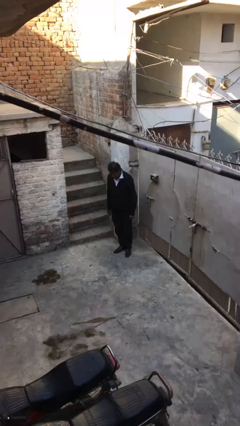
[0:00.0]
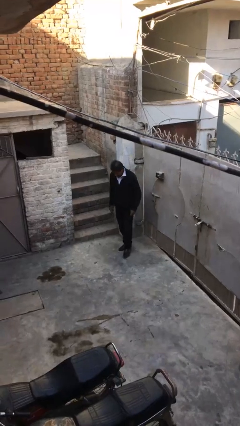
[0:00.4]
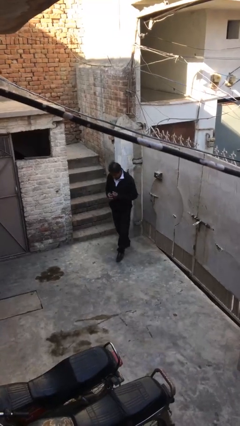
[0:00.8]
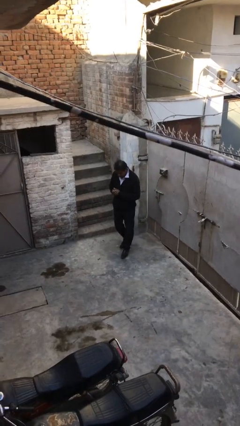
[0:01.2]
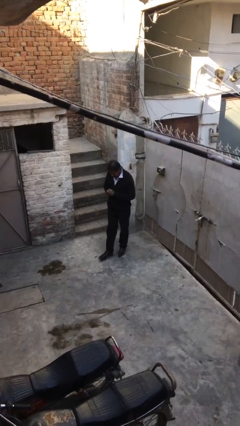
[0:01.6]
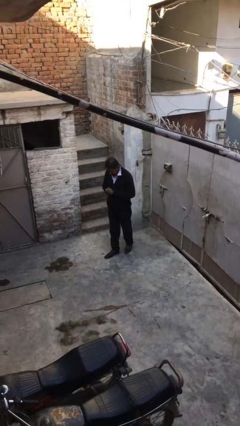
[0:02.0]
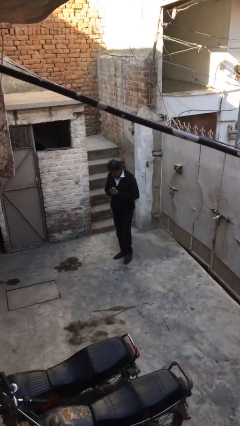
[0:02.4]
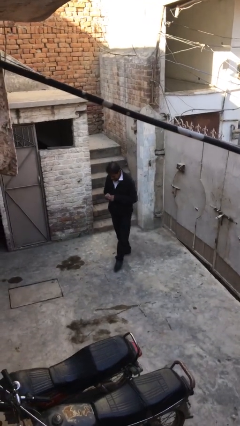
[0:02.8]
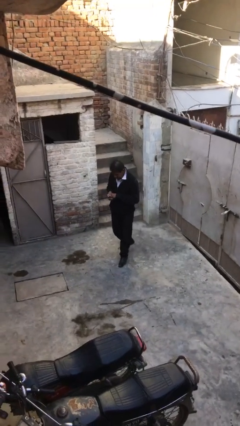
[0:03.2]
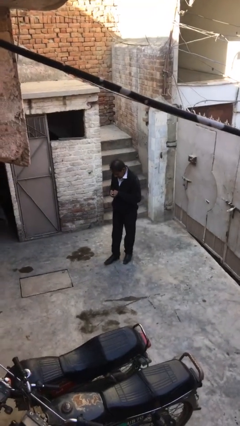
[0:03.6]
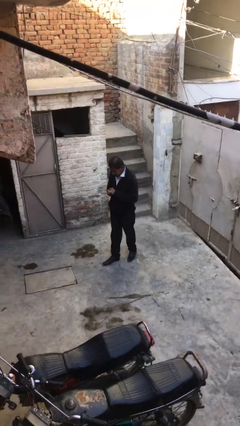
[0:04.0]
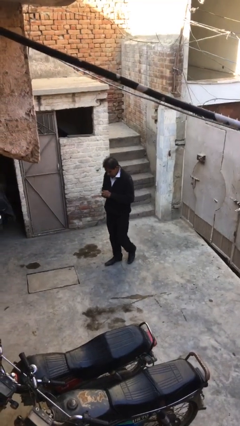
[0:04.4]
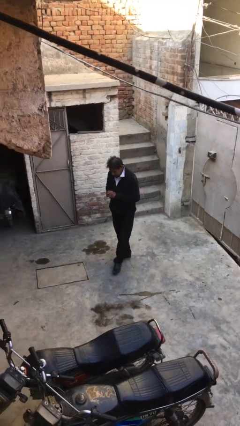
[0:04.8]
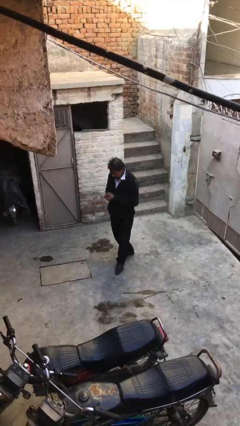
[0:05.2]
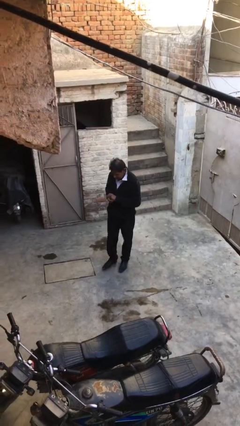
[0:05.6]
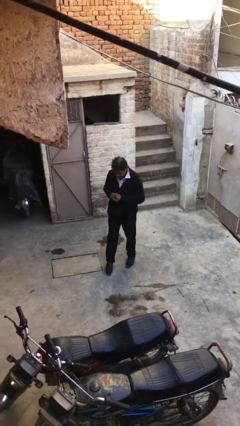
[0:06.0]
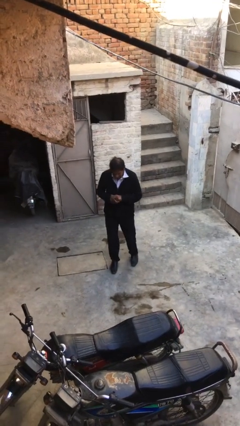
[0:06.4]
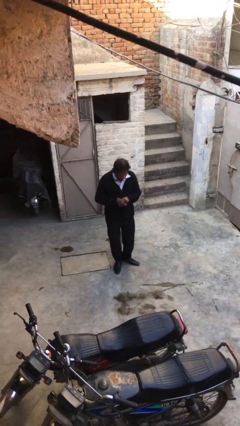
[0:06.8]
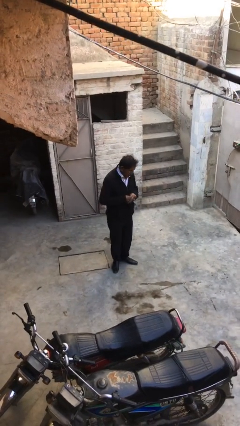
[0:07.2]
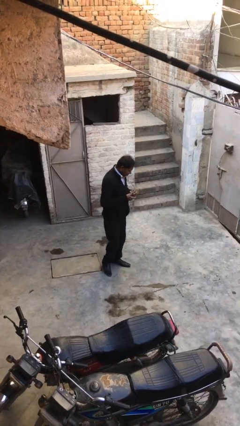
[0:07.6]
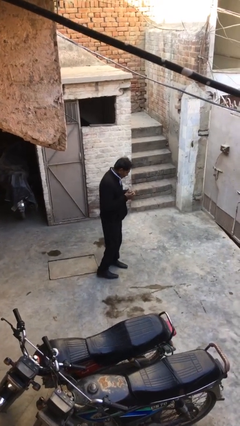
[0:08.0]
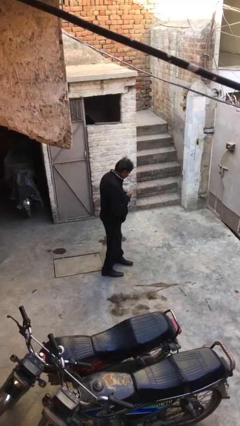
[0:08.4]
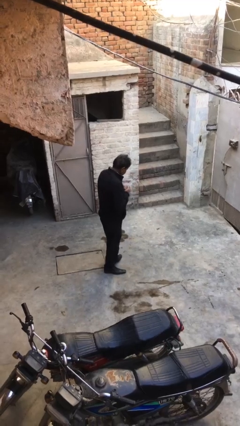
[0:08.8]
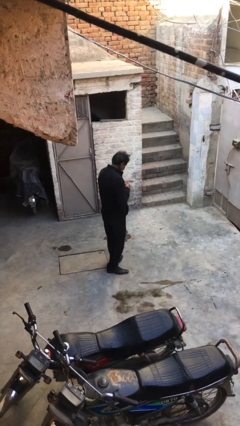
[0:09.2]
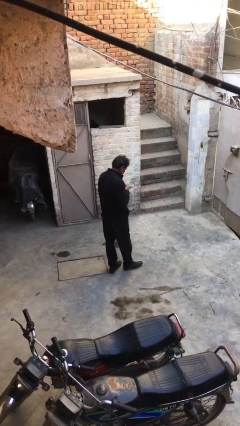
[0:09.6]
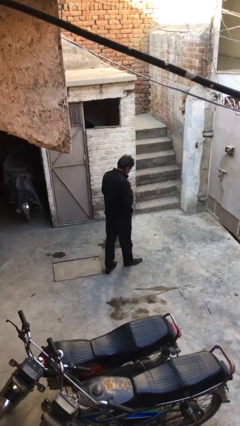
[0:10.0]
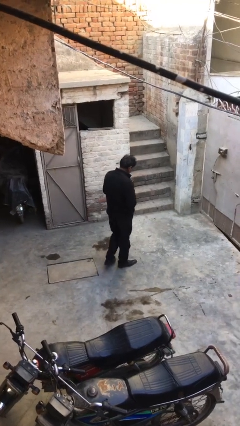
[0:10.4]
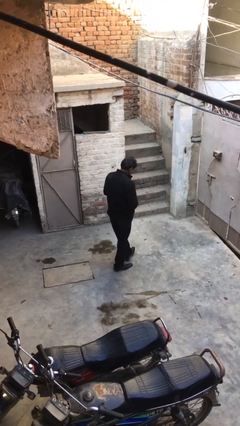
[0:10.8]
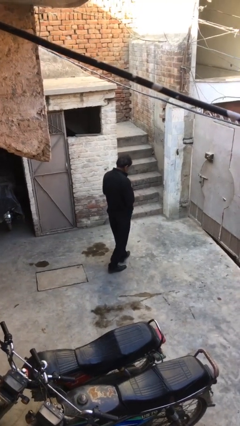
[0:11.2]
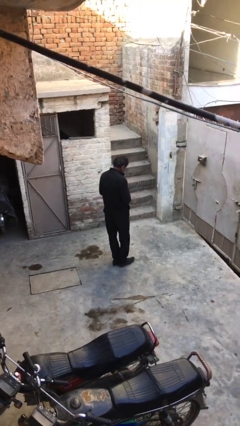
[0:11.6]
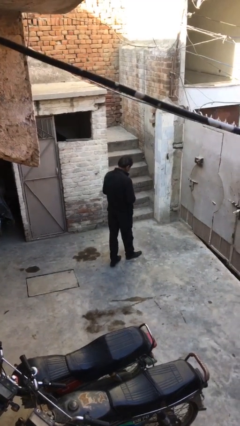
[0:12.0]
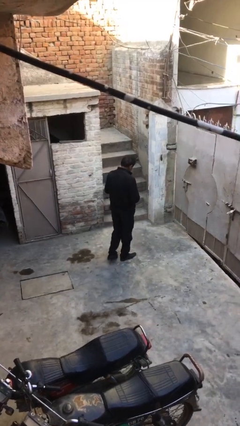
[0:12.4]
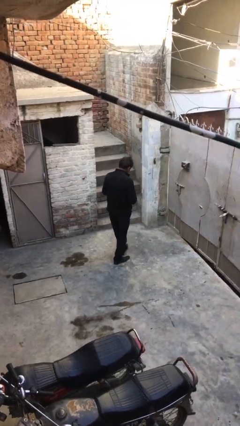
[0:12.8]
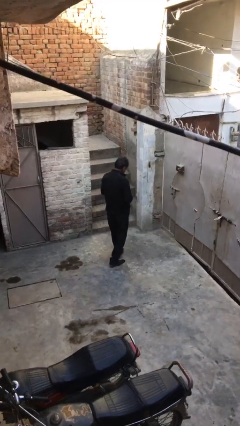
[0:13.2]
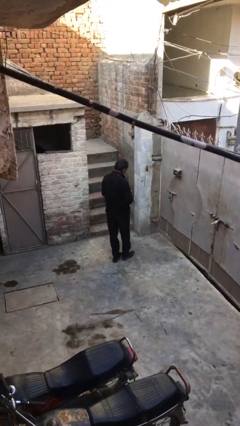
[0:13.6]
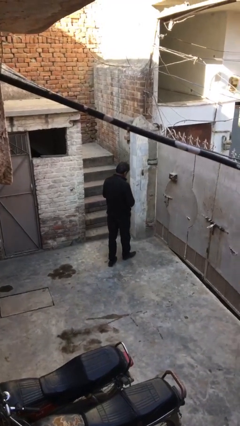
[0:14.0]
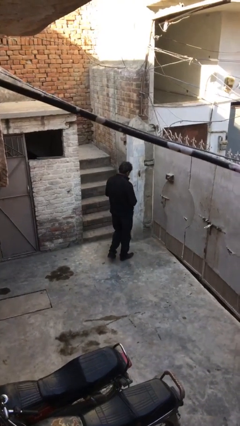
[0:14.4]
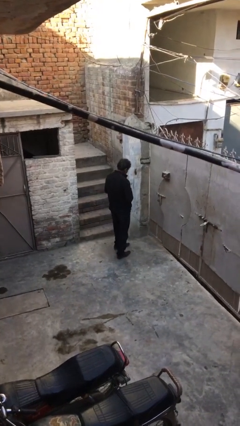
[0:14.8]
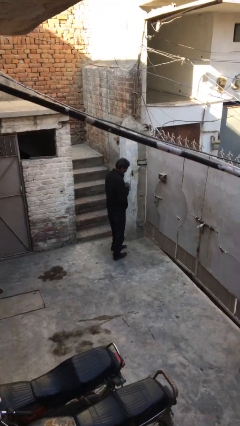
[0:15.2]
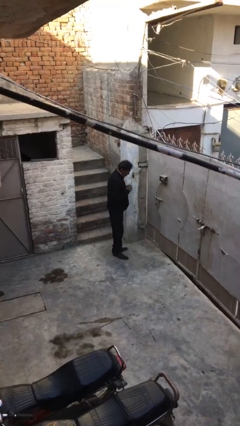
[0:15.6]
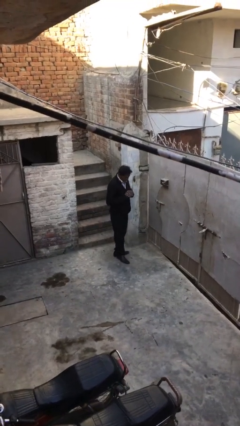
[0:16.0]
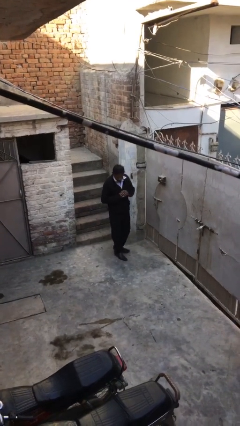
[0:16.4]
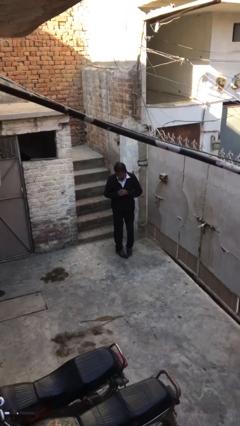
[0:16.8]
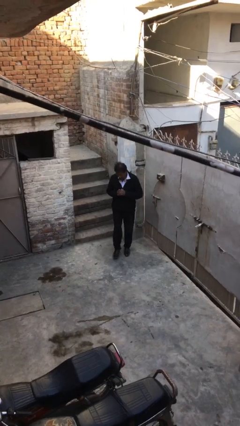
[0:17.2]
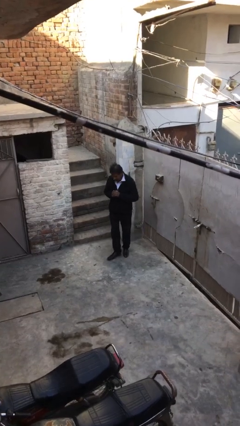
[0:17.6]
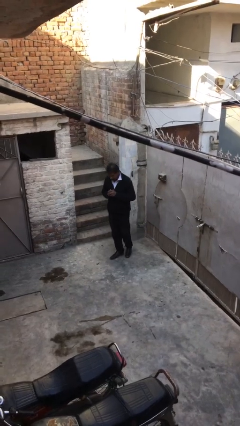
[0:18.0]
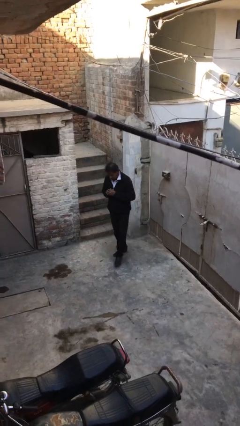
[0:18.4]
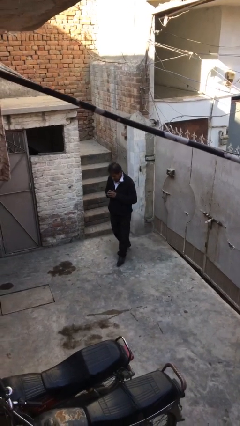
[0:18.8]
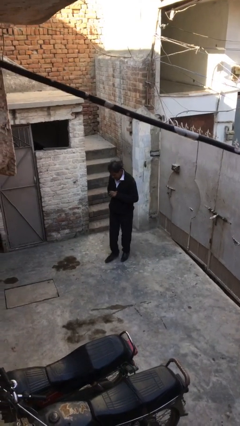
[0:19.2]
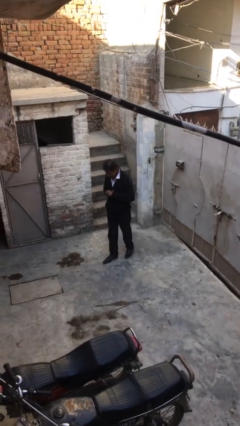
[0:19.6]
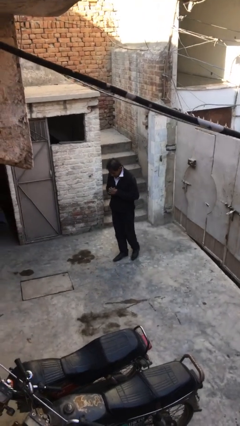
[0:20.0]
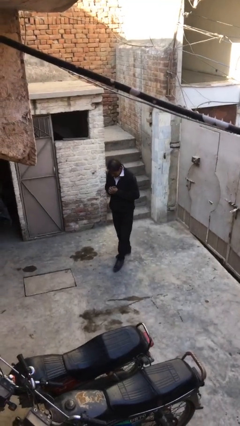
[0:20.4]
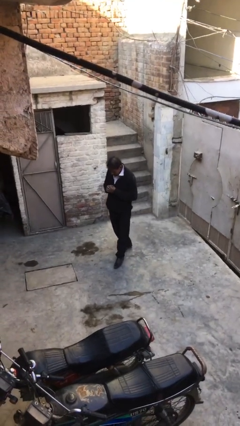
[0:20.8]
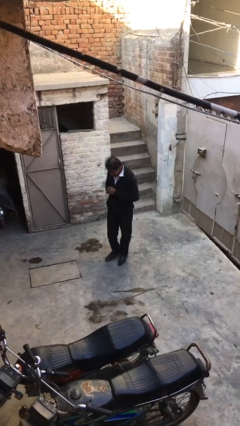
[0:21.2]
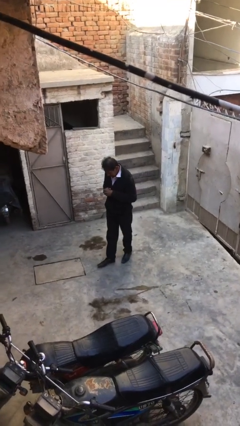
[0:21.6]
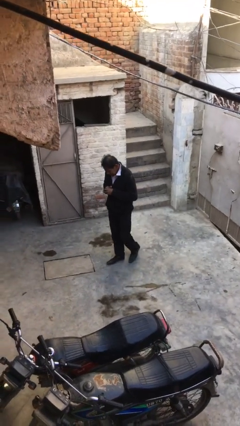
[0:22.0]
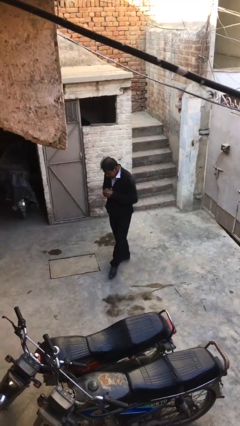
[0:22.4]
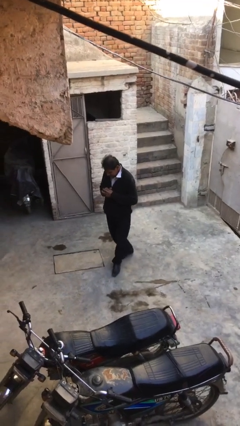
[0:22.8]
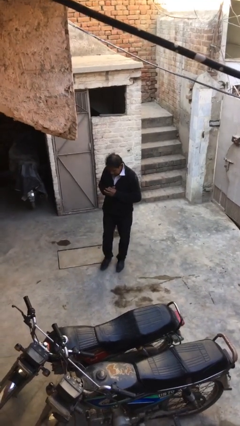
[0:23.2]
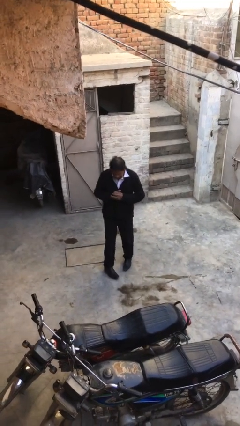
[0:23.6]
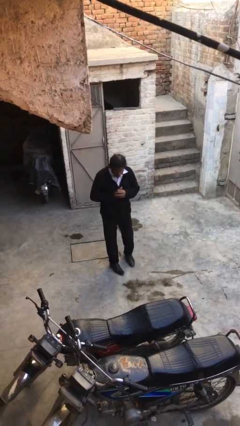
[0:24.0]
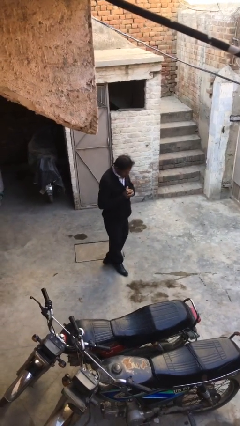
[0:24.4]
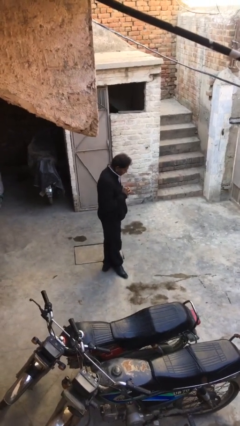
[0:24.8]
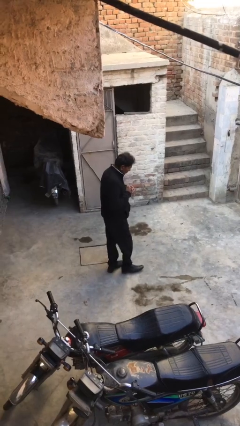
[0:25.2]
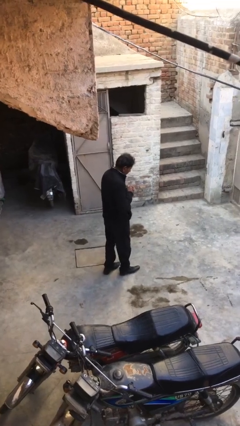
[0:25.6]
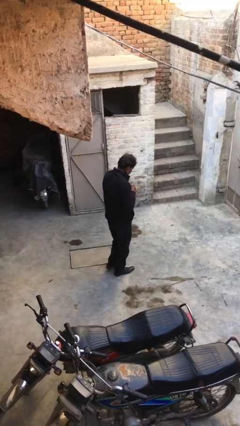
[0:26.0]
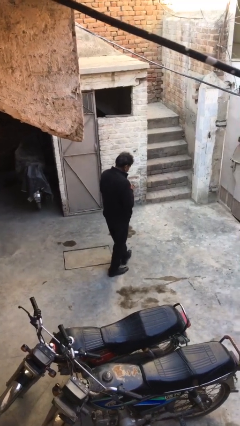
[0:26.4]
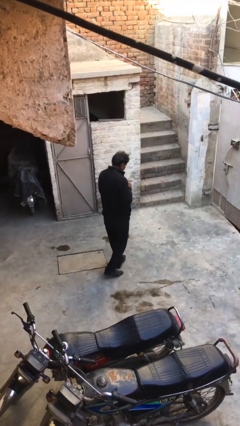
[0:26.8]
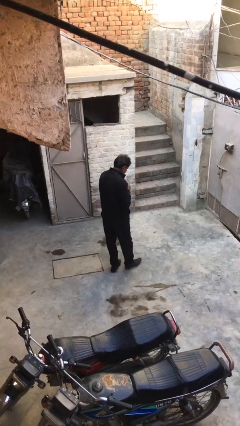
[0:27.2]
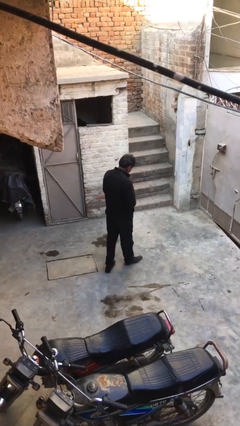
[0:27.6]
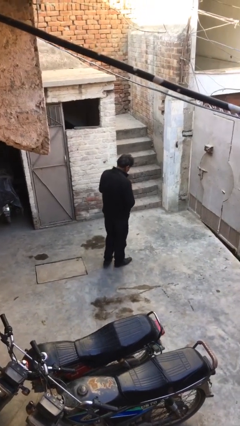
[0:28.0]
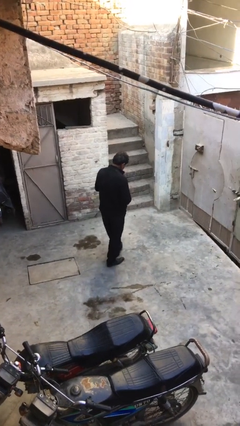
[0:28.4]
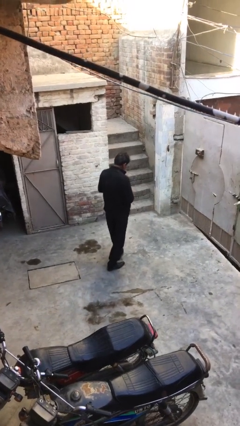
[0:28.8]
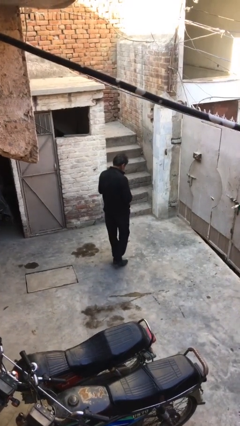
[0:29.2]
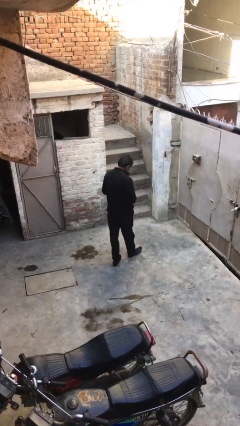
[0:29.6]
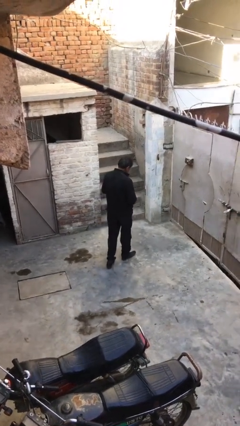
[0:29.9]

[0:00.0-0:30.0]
person walks

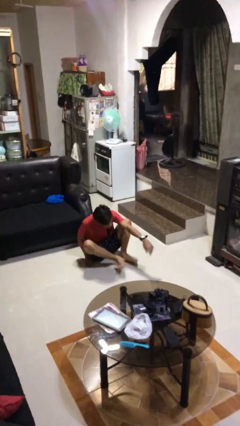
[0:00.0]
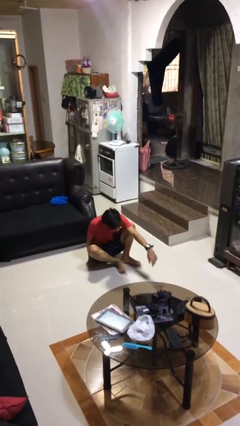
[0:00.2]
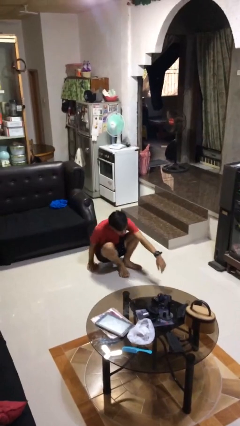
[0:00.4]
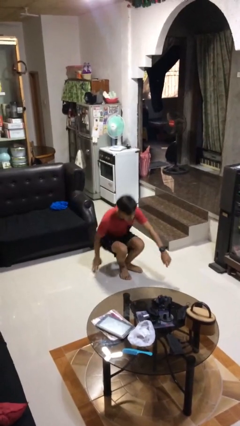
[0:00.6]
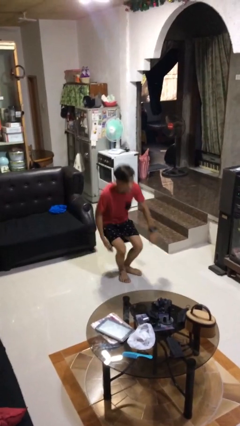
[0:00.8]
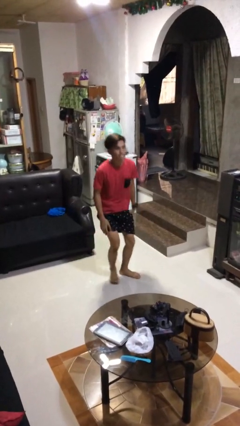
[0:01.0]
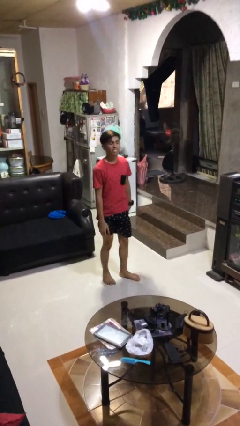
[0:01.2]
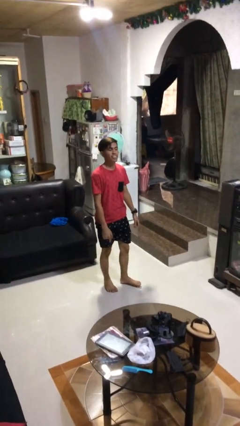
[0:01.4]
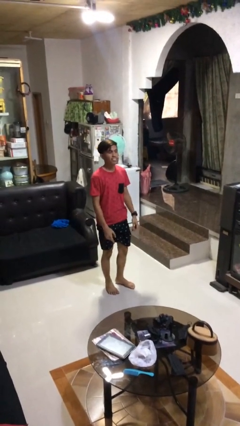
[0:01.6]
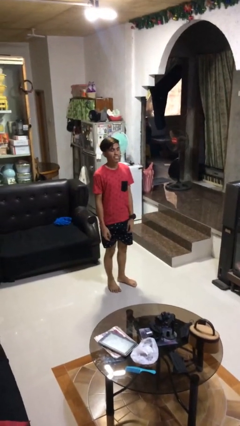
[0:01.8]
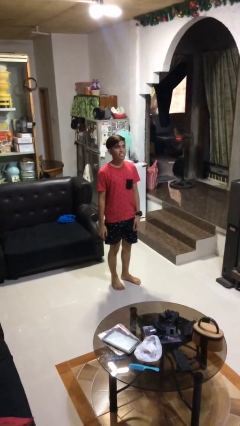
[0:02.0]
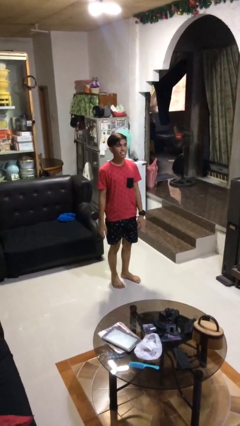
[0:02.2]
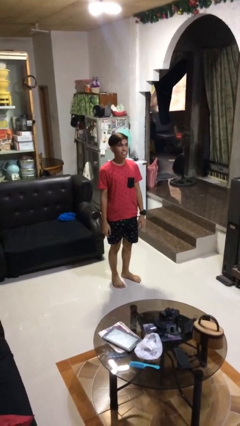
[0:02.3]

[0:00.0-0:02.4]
person stands up from floor

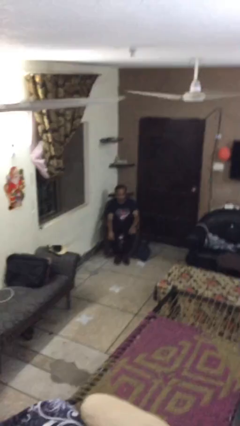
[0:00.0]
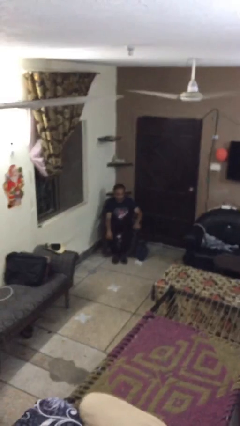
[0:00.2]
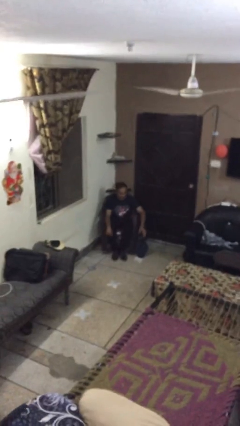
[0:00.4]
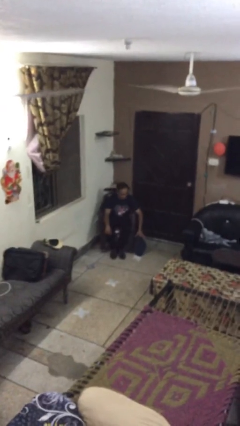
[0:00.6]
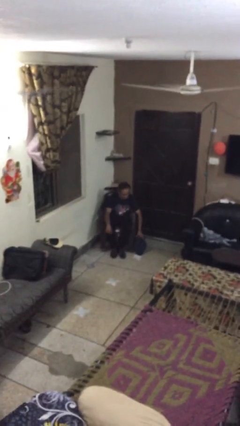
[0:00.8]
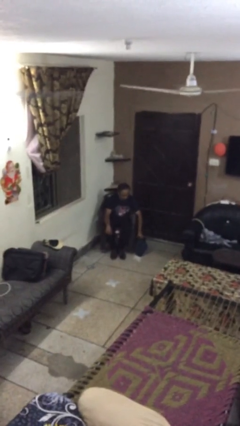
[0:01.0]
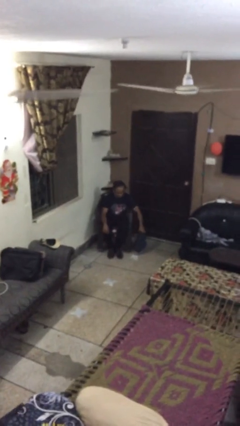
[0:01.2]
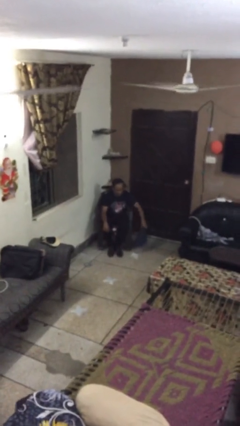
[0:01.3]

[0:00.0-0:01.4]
person picks up object from floor
